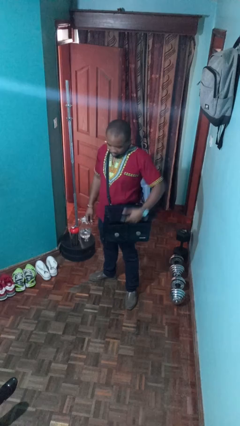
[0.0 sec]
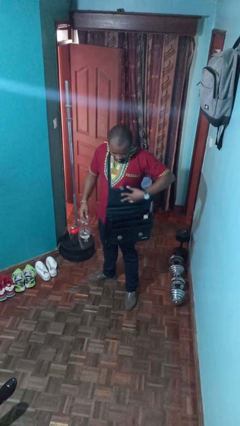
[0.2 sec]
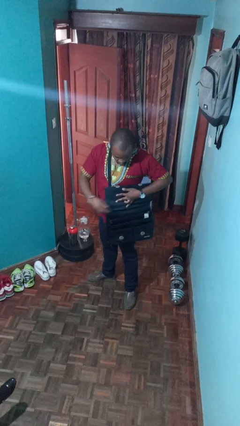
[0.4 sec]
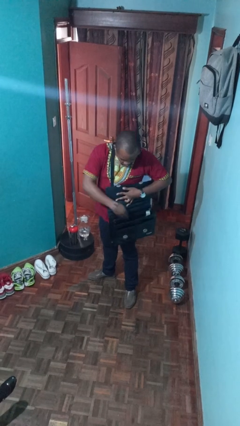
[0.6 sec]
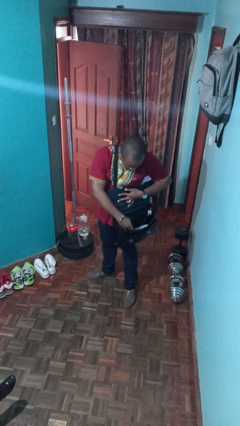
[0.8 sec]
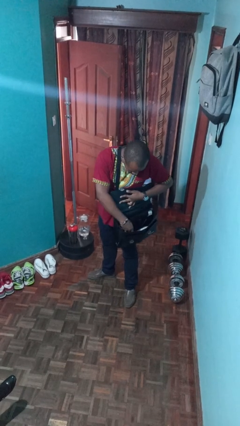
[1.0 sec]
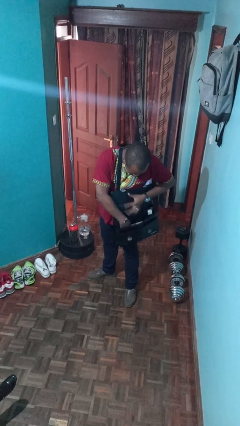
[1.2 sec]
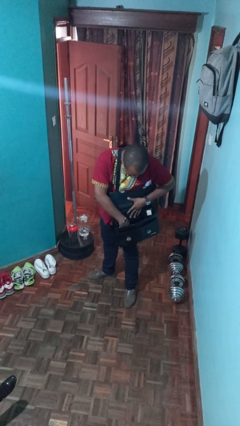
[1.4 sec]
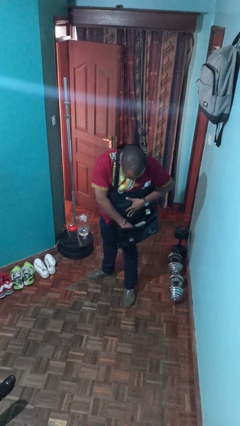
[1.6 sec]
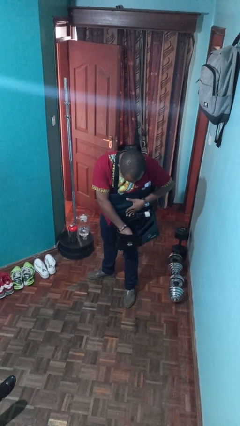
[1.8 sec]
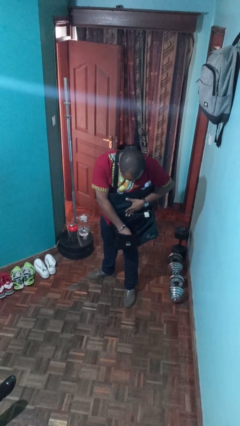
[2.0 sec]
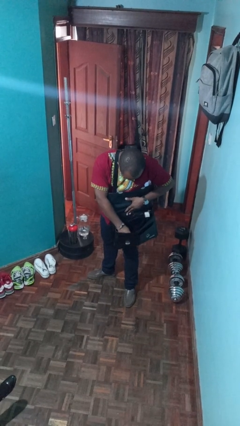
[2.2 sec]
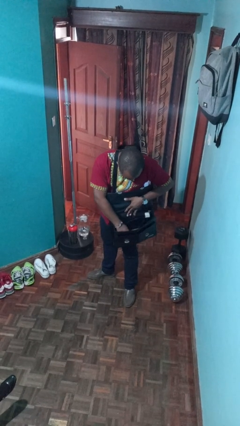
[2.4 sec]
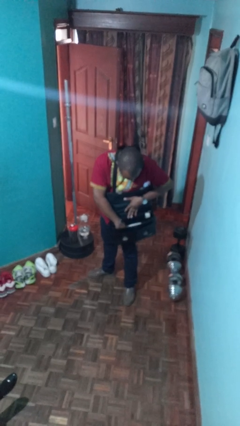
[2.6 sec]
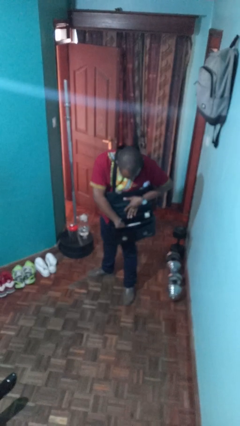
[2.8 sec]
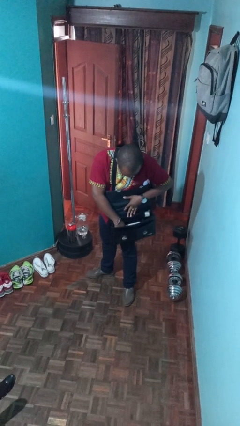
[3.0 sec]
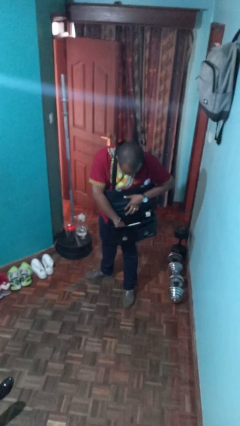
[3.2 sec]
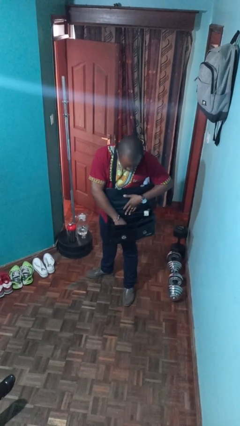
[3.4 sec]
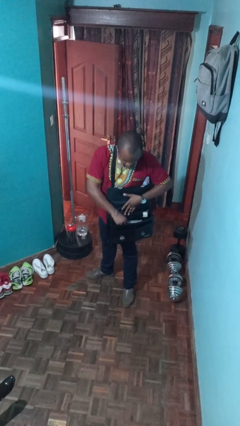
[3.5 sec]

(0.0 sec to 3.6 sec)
person searches in purse

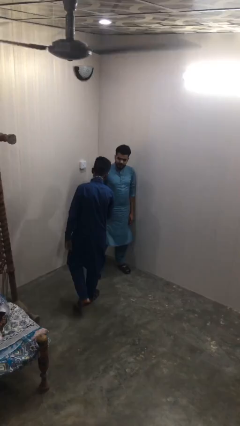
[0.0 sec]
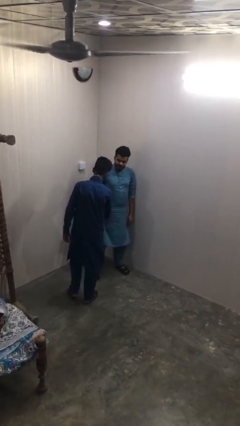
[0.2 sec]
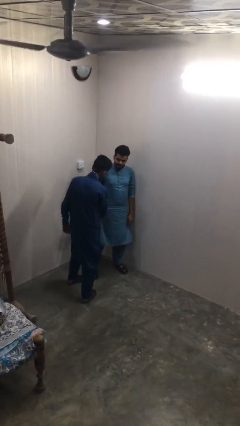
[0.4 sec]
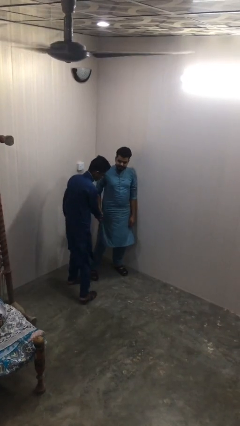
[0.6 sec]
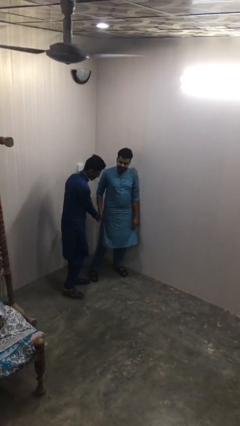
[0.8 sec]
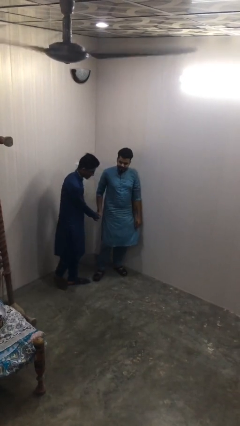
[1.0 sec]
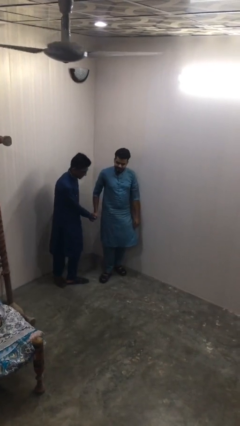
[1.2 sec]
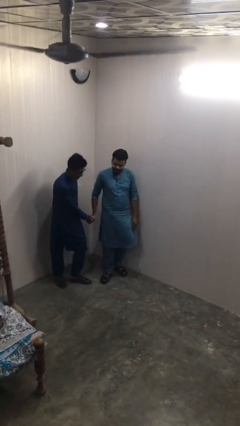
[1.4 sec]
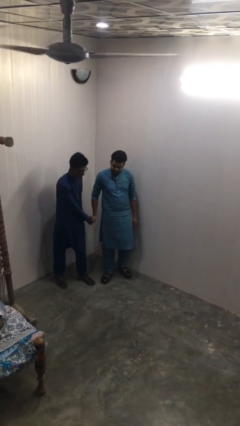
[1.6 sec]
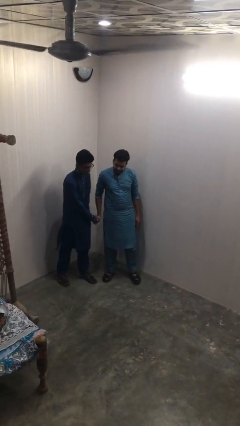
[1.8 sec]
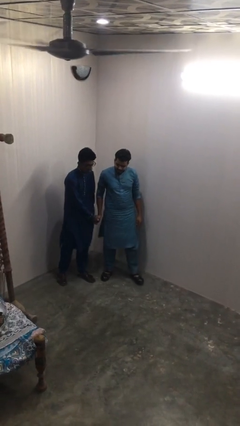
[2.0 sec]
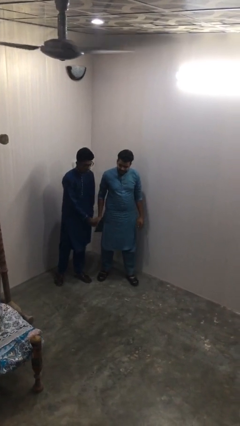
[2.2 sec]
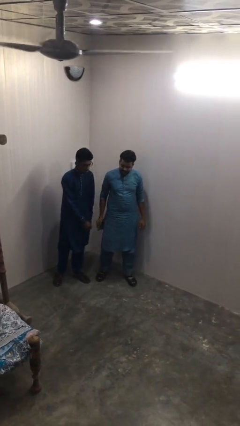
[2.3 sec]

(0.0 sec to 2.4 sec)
person shakes hand

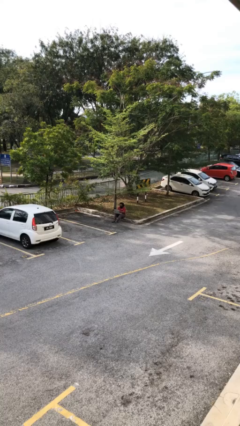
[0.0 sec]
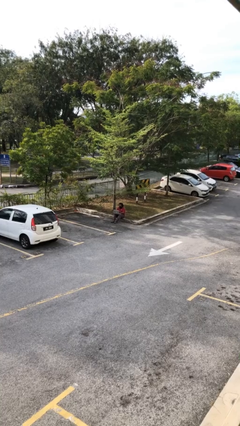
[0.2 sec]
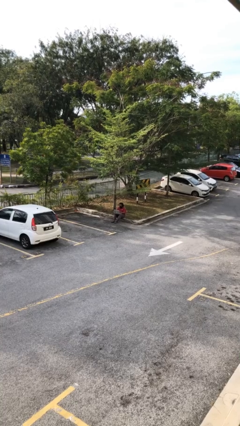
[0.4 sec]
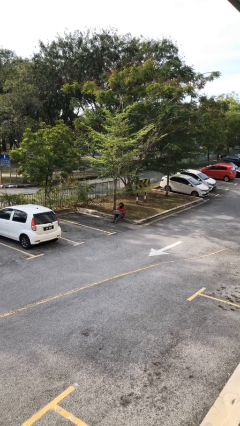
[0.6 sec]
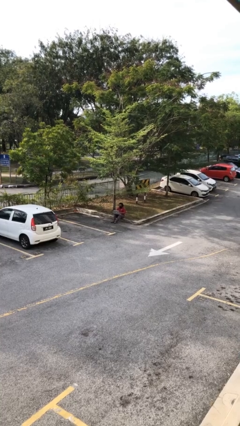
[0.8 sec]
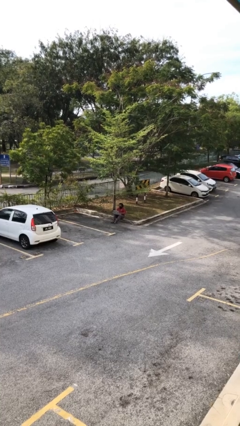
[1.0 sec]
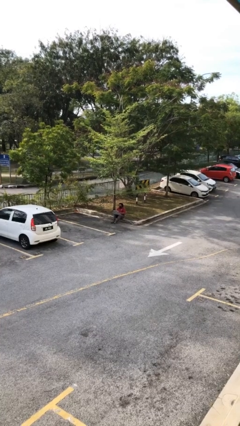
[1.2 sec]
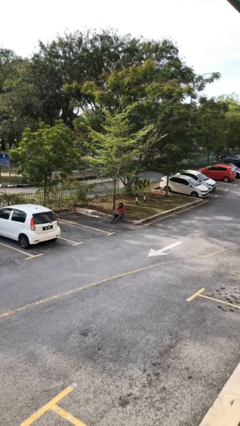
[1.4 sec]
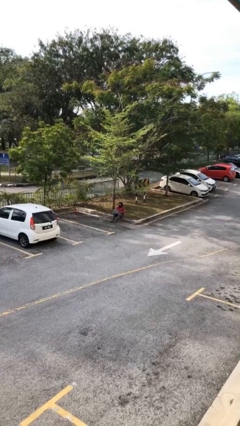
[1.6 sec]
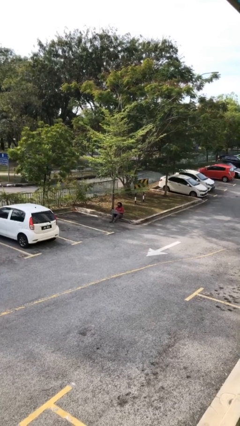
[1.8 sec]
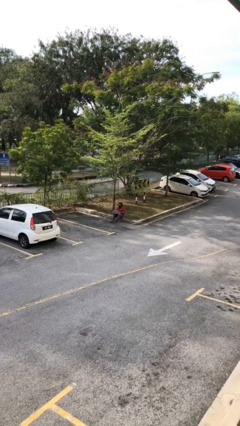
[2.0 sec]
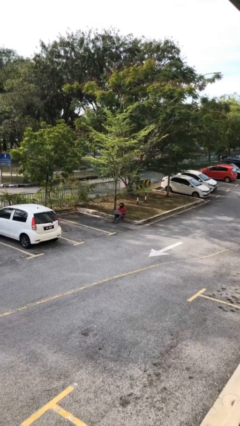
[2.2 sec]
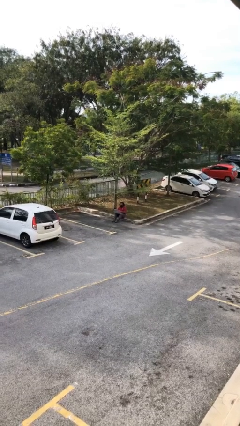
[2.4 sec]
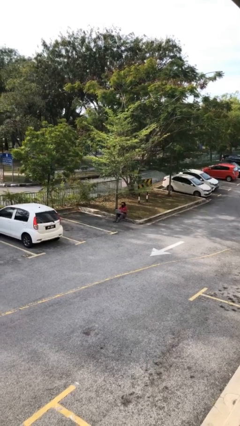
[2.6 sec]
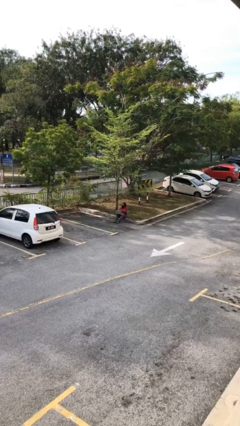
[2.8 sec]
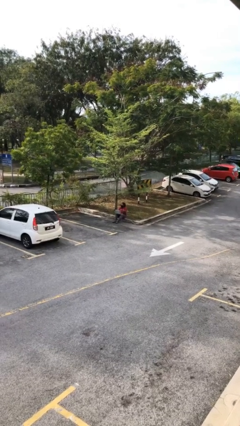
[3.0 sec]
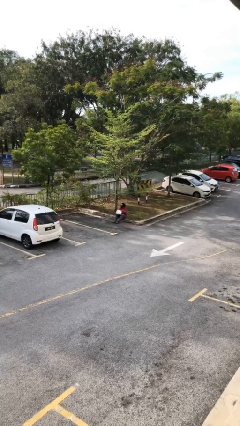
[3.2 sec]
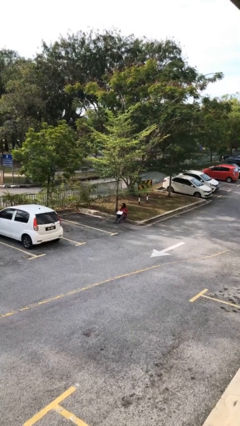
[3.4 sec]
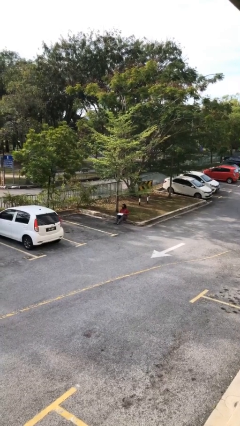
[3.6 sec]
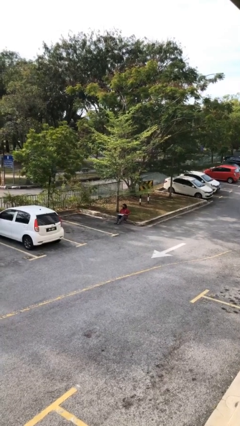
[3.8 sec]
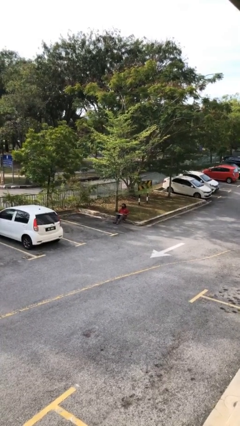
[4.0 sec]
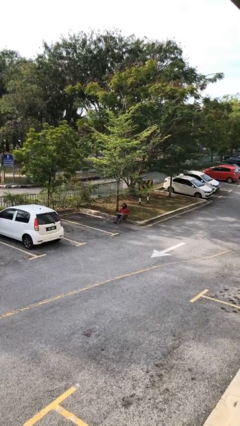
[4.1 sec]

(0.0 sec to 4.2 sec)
person interacts with laptop

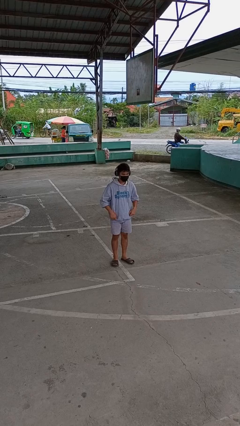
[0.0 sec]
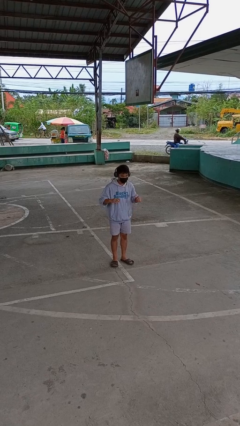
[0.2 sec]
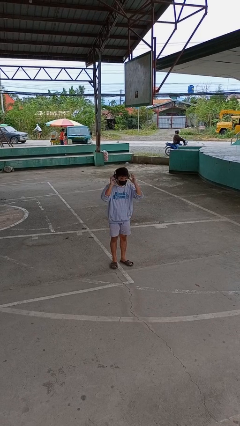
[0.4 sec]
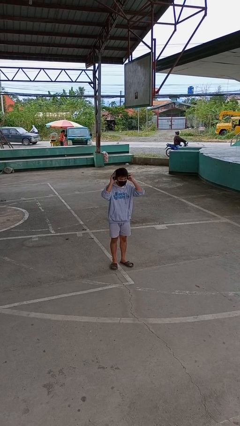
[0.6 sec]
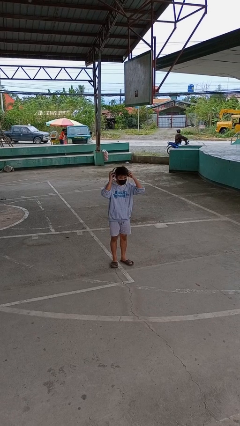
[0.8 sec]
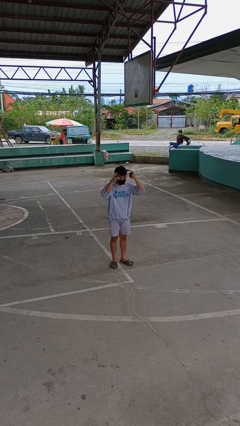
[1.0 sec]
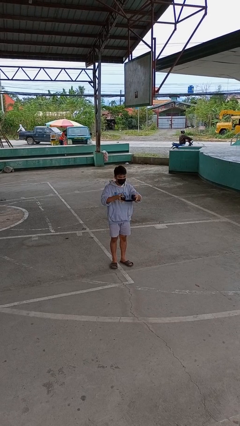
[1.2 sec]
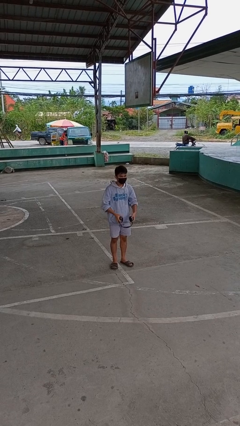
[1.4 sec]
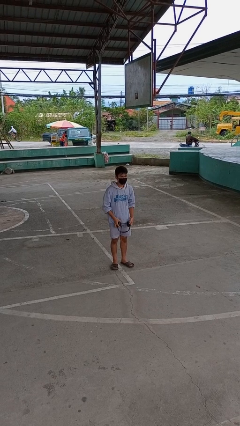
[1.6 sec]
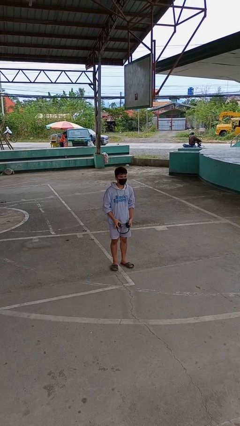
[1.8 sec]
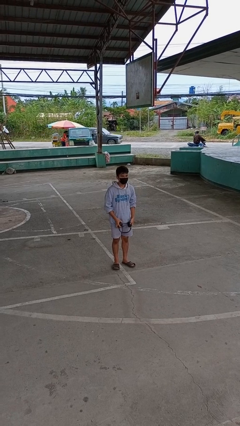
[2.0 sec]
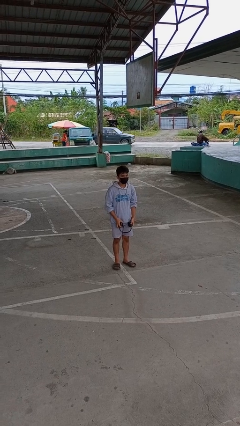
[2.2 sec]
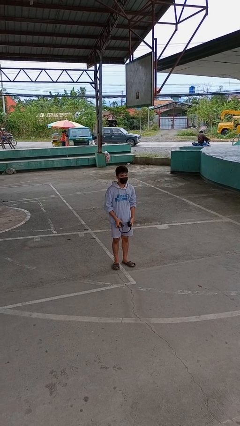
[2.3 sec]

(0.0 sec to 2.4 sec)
person takes off headphones

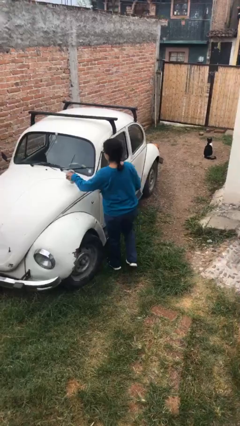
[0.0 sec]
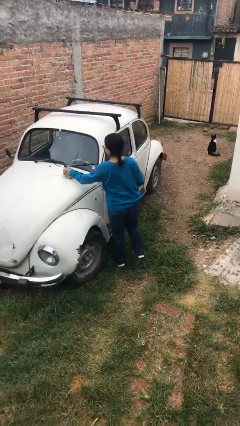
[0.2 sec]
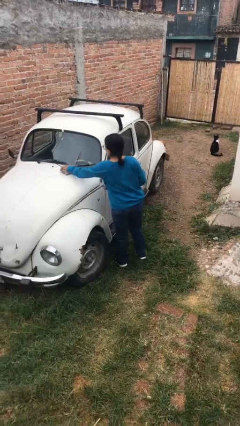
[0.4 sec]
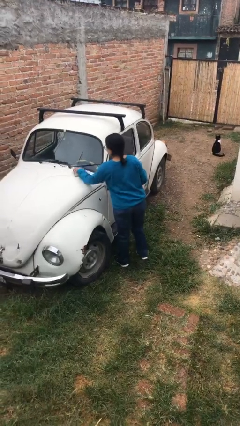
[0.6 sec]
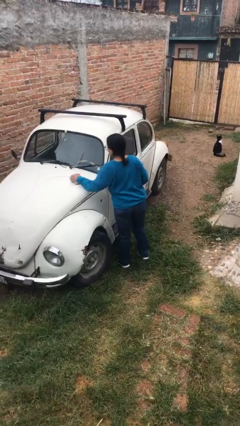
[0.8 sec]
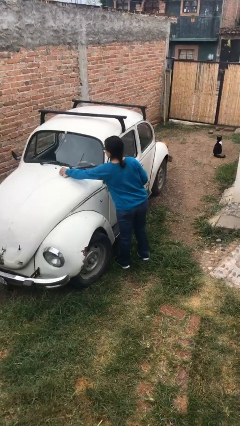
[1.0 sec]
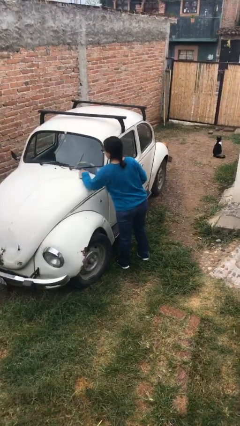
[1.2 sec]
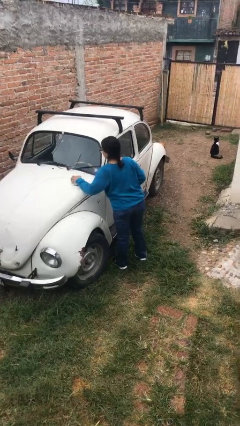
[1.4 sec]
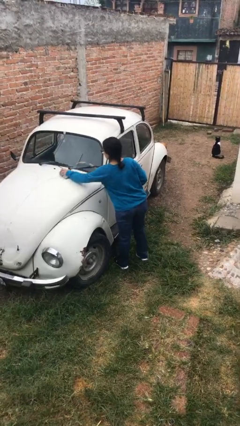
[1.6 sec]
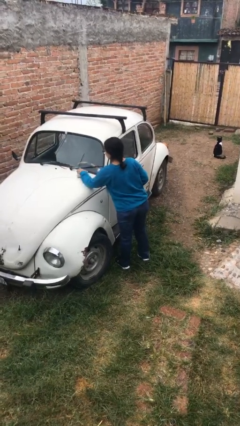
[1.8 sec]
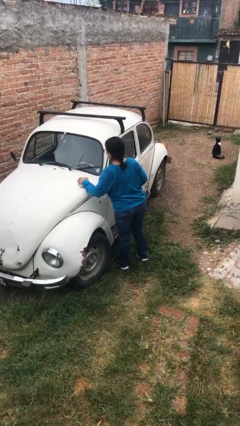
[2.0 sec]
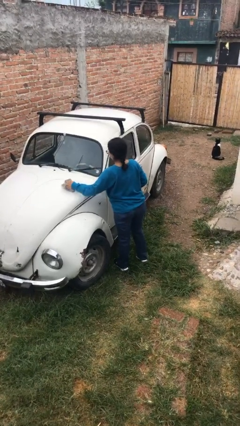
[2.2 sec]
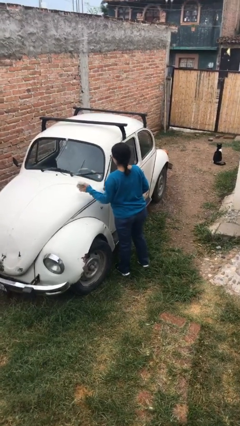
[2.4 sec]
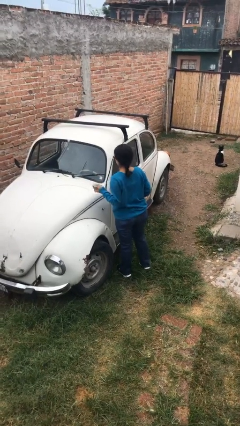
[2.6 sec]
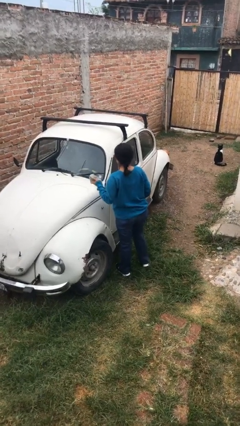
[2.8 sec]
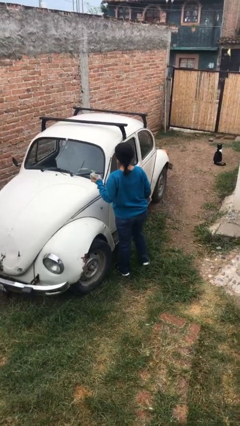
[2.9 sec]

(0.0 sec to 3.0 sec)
person polishes car with rag

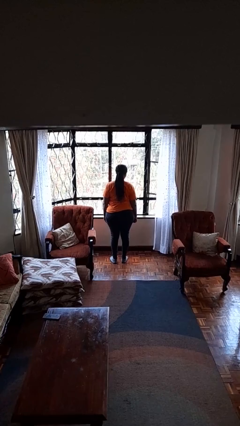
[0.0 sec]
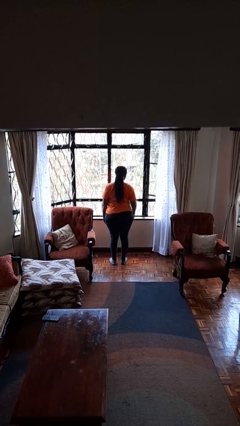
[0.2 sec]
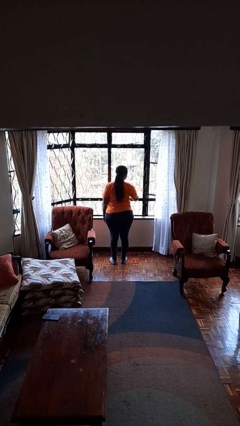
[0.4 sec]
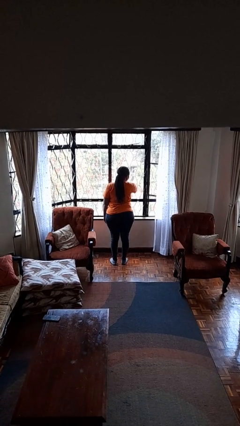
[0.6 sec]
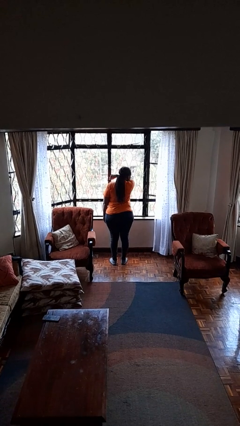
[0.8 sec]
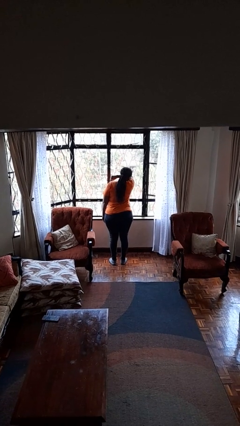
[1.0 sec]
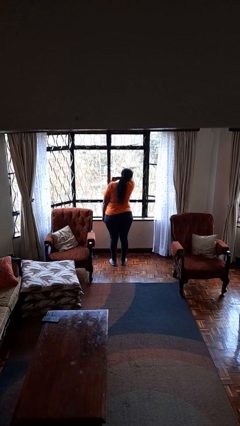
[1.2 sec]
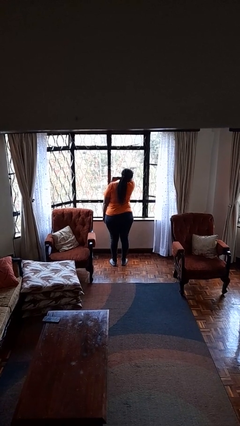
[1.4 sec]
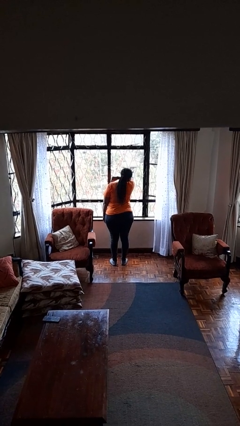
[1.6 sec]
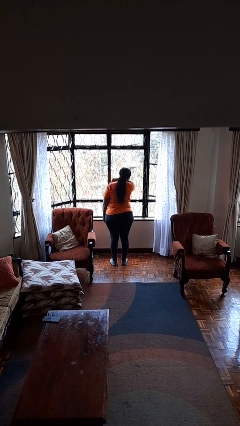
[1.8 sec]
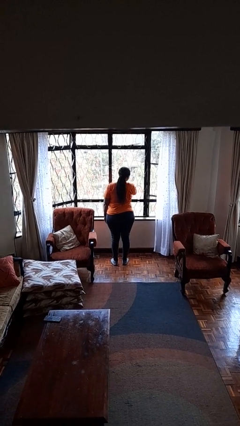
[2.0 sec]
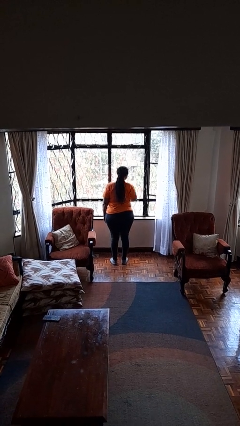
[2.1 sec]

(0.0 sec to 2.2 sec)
person sneezes into arm
